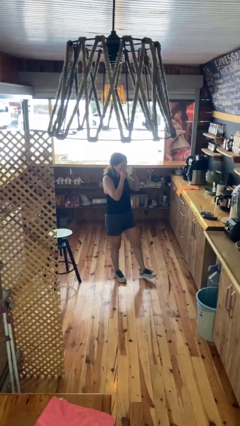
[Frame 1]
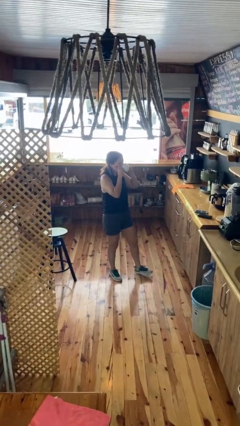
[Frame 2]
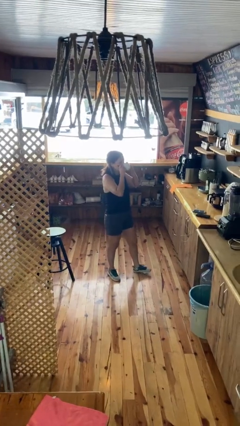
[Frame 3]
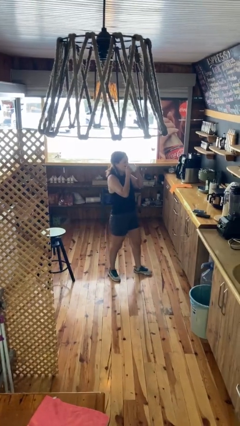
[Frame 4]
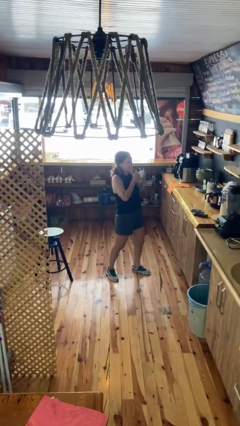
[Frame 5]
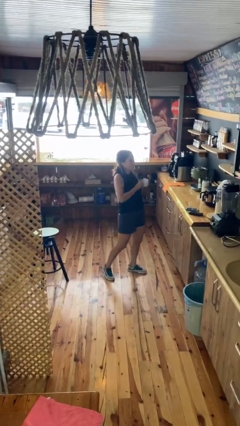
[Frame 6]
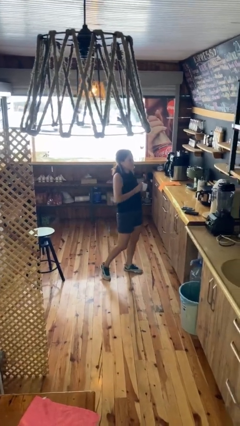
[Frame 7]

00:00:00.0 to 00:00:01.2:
person drinks from mug

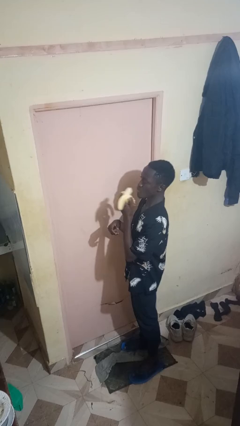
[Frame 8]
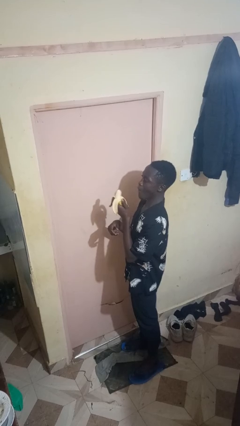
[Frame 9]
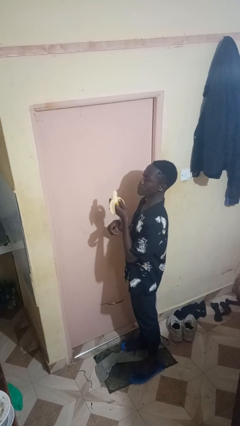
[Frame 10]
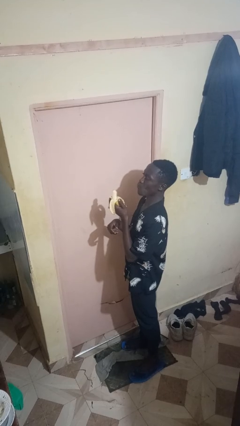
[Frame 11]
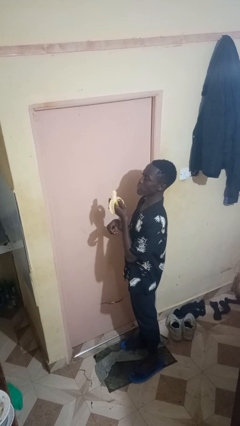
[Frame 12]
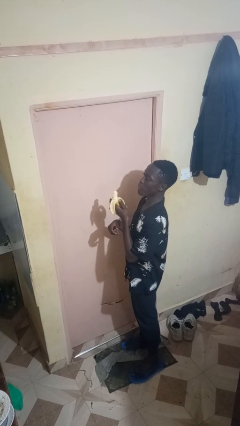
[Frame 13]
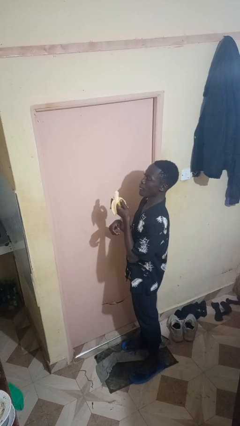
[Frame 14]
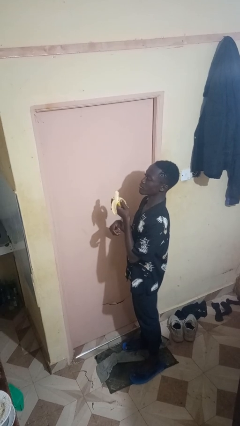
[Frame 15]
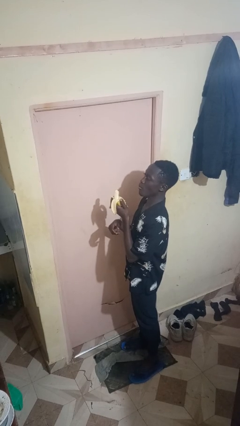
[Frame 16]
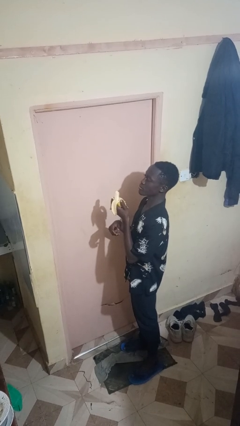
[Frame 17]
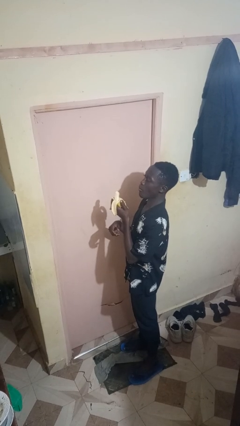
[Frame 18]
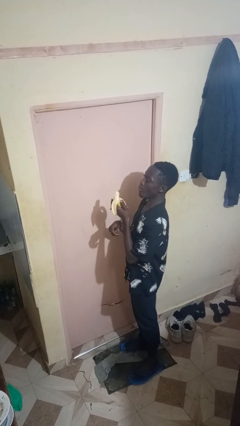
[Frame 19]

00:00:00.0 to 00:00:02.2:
person eats banana

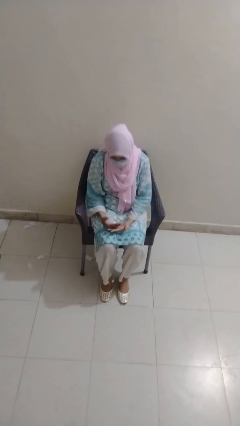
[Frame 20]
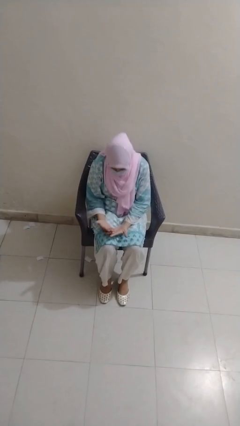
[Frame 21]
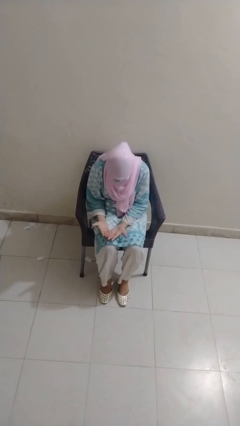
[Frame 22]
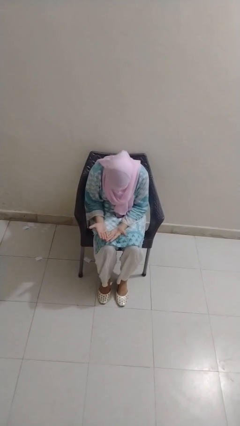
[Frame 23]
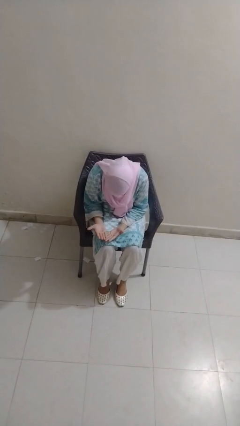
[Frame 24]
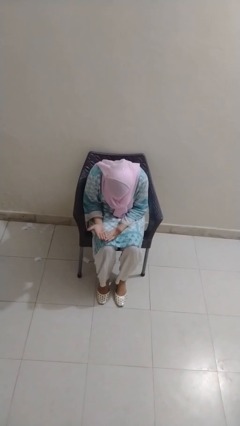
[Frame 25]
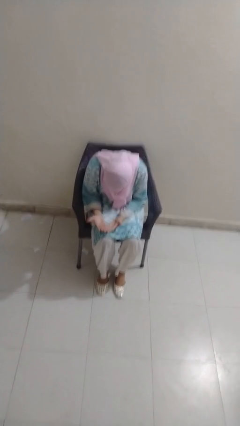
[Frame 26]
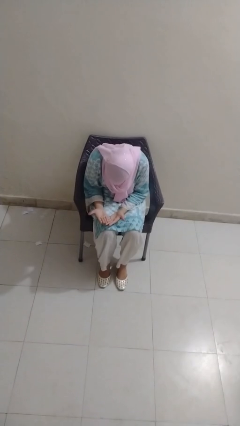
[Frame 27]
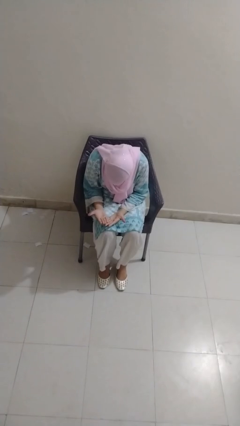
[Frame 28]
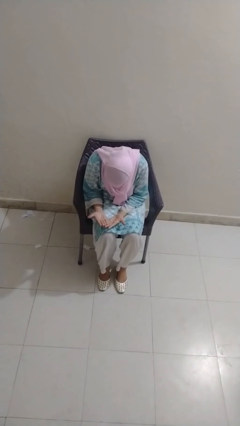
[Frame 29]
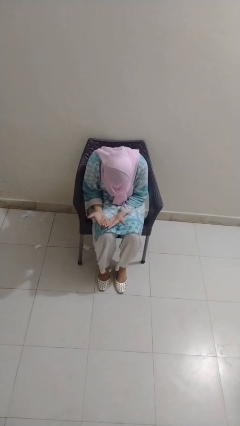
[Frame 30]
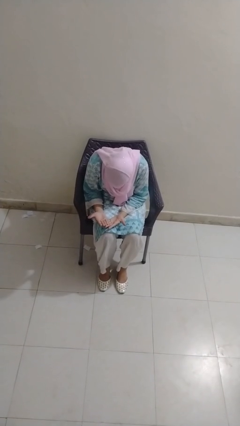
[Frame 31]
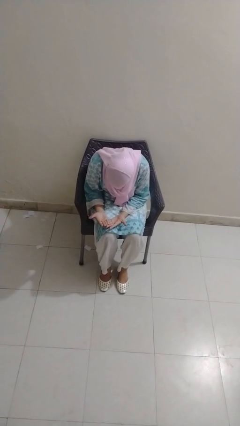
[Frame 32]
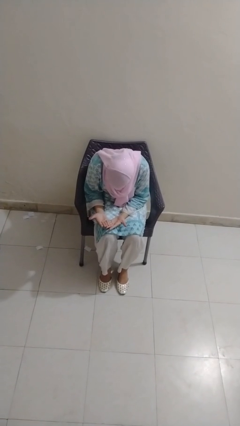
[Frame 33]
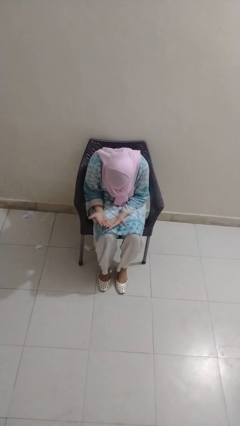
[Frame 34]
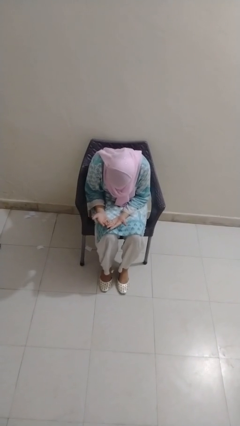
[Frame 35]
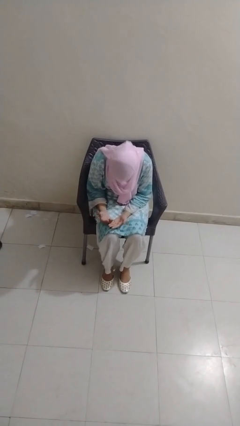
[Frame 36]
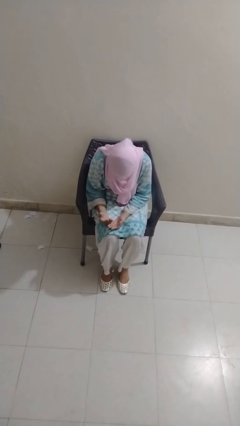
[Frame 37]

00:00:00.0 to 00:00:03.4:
person looks at hands in lap

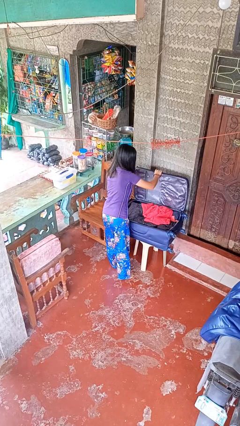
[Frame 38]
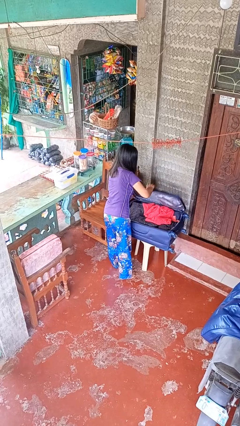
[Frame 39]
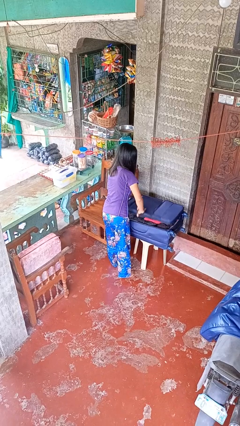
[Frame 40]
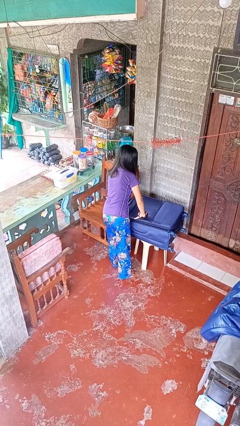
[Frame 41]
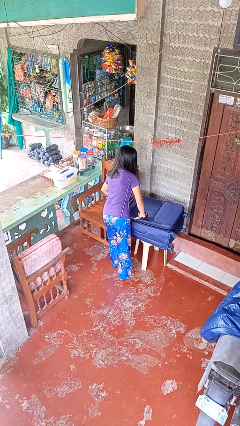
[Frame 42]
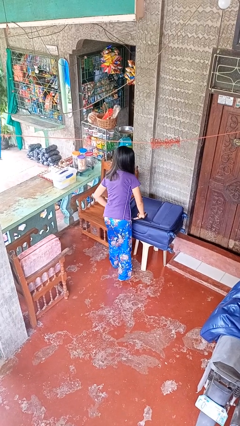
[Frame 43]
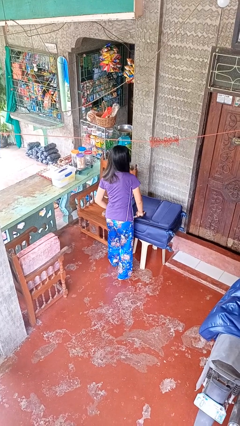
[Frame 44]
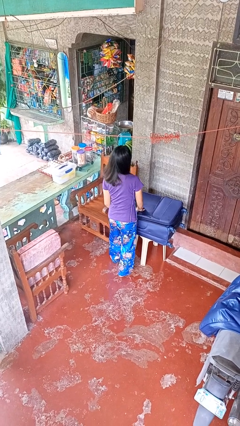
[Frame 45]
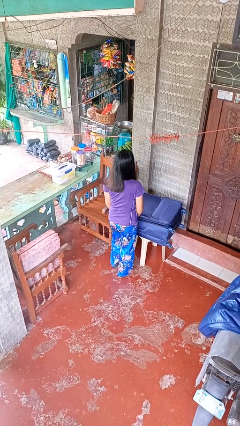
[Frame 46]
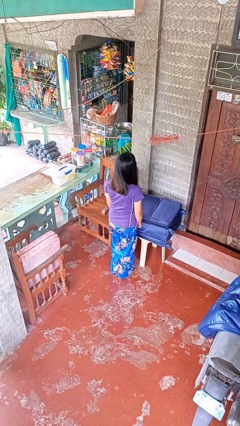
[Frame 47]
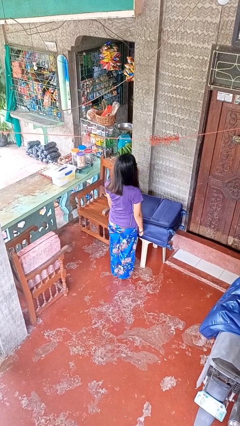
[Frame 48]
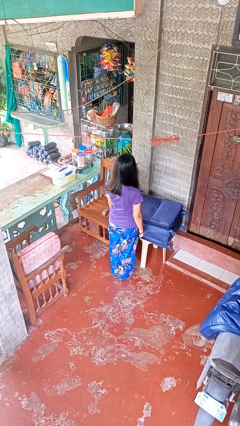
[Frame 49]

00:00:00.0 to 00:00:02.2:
person closes suitcase

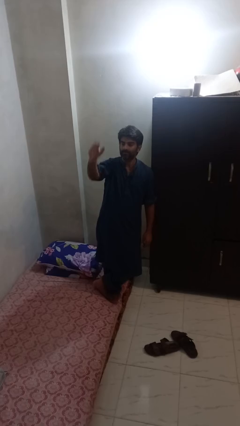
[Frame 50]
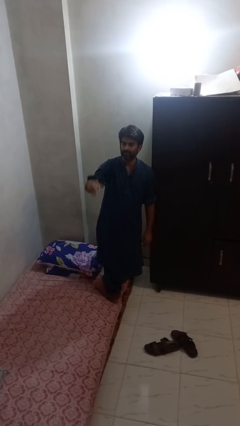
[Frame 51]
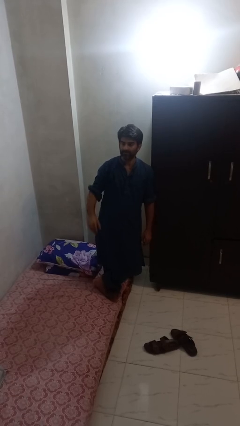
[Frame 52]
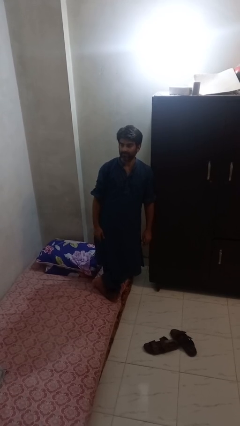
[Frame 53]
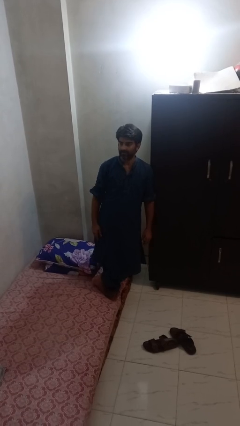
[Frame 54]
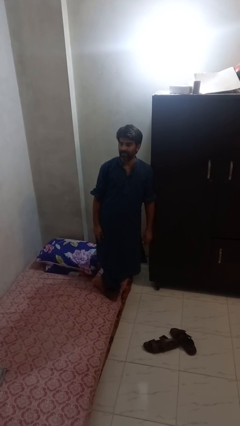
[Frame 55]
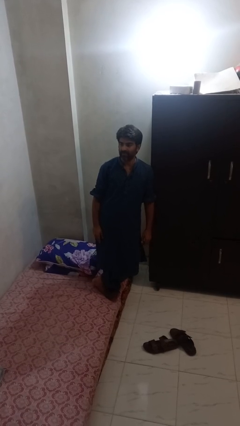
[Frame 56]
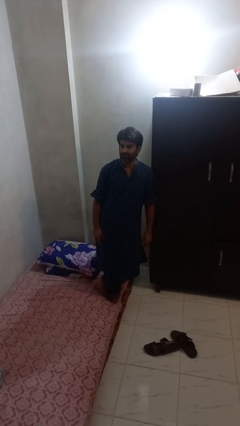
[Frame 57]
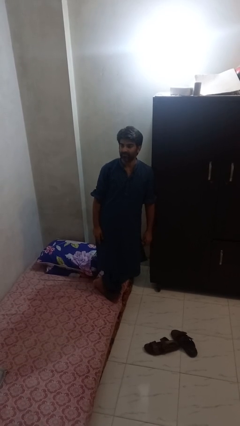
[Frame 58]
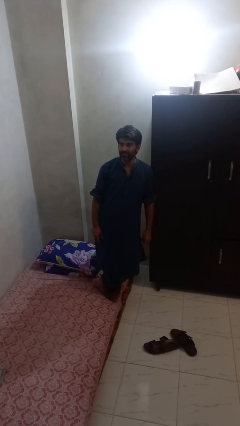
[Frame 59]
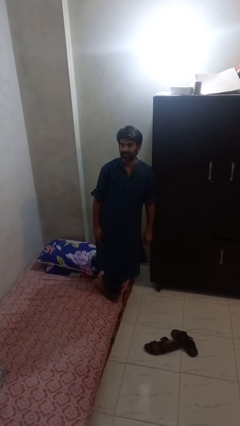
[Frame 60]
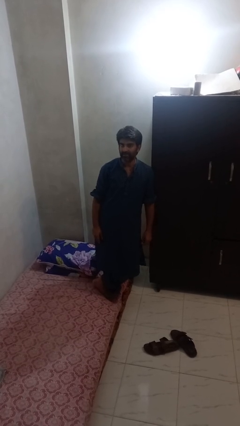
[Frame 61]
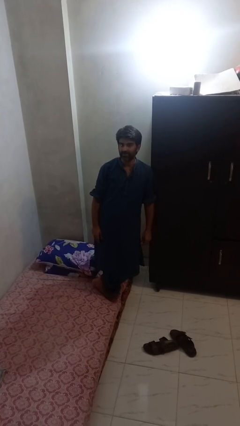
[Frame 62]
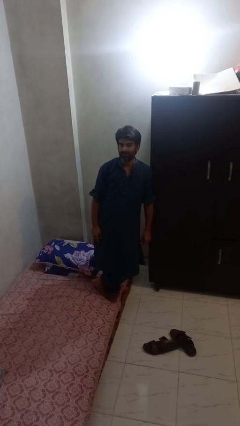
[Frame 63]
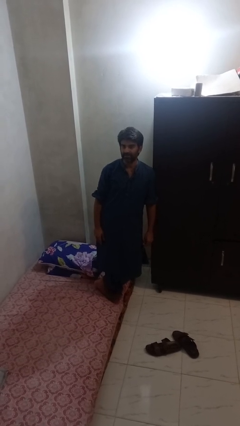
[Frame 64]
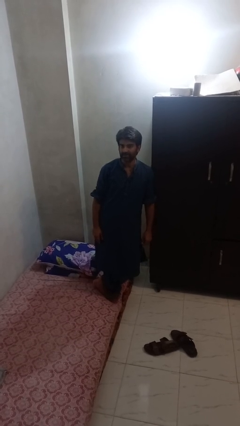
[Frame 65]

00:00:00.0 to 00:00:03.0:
person gestures lower hand

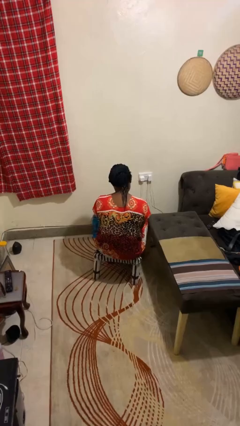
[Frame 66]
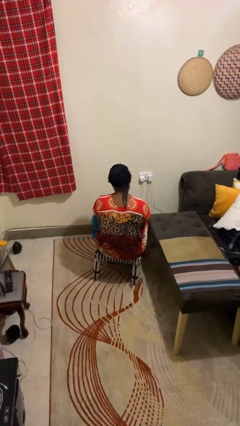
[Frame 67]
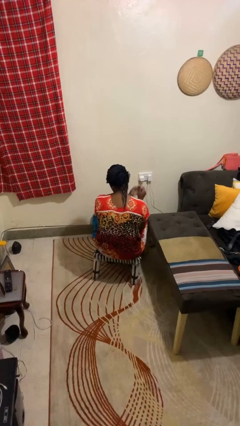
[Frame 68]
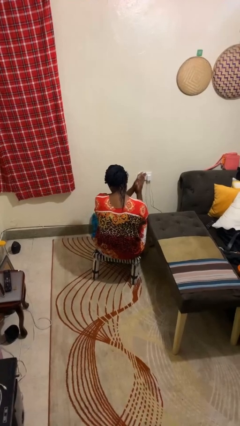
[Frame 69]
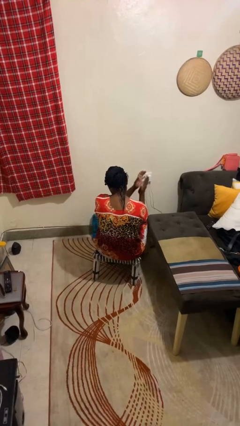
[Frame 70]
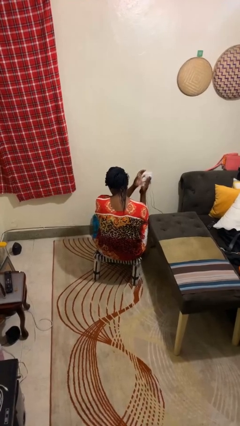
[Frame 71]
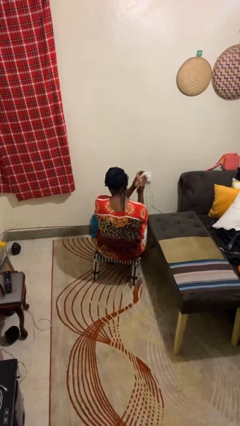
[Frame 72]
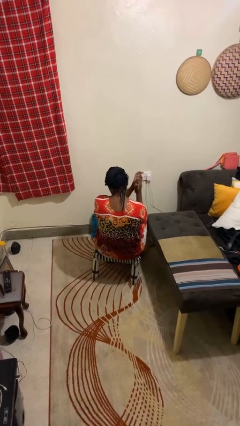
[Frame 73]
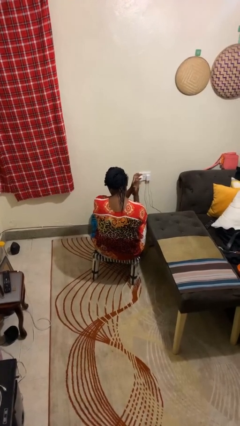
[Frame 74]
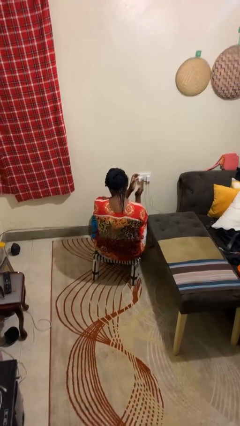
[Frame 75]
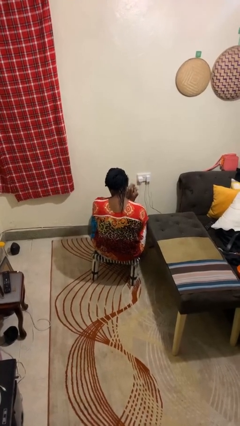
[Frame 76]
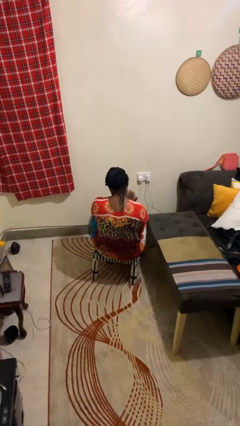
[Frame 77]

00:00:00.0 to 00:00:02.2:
person claps hands

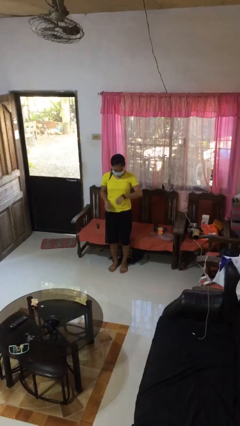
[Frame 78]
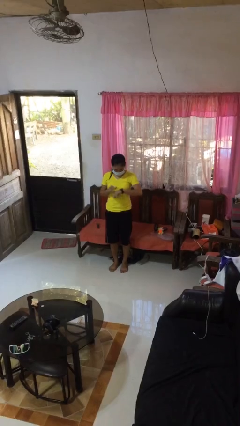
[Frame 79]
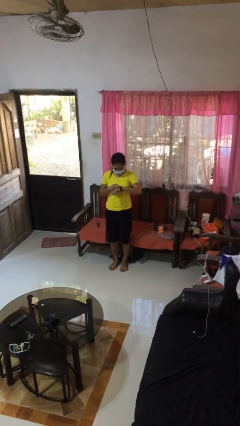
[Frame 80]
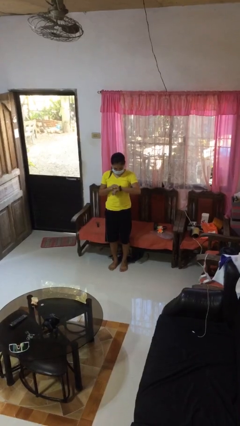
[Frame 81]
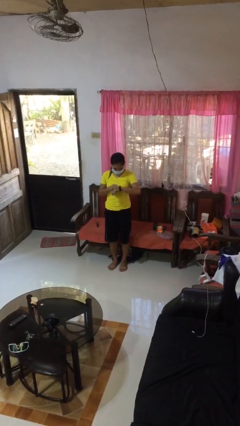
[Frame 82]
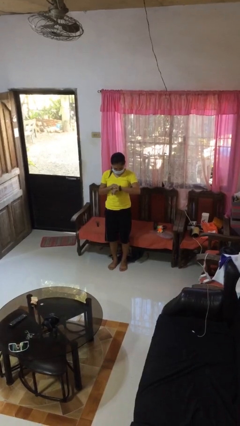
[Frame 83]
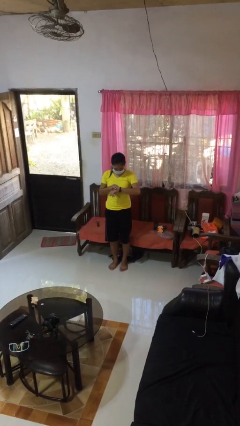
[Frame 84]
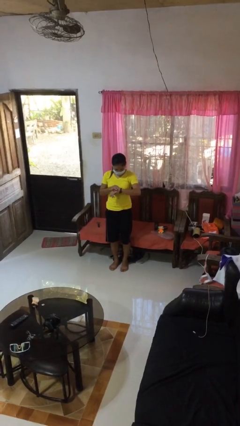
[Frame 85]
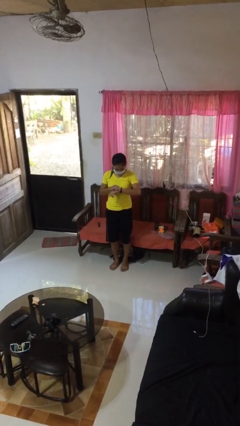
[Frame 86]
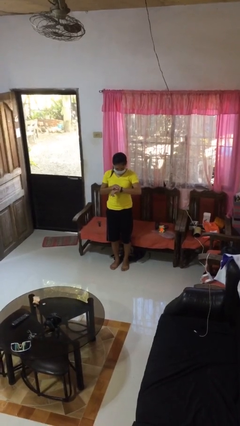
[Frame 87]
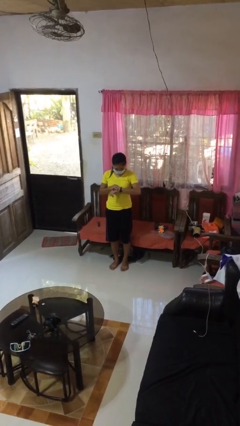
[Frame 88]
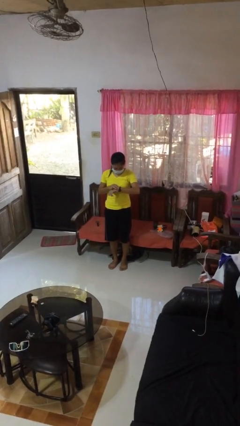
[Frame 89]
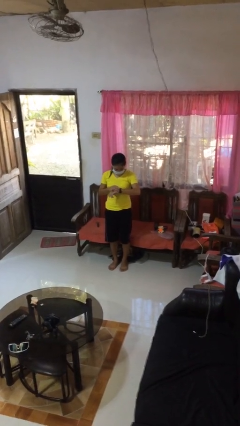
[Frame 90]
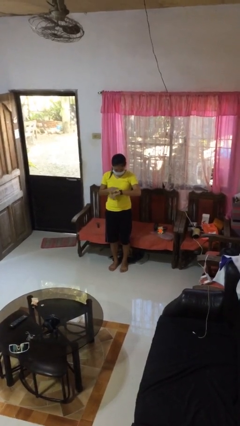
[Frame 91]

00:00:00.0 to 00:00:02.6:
person looks at wristwatch

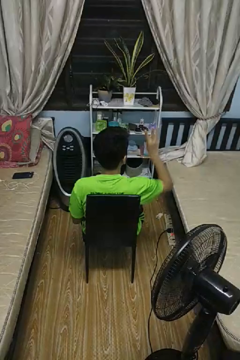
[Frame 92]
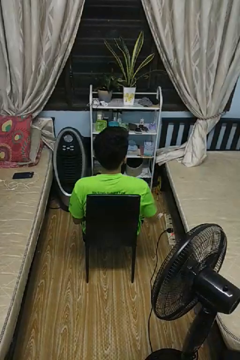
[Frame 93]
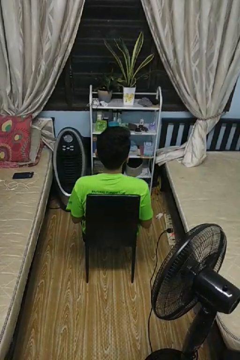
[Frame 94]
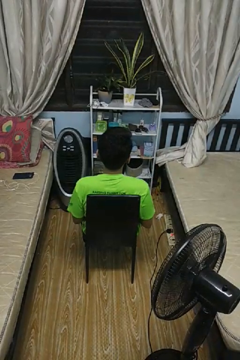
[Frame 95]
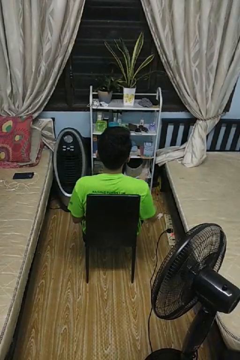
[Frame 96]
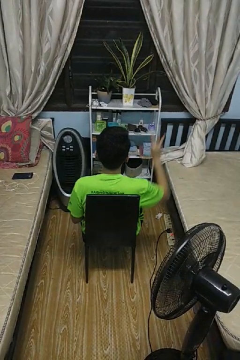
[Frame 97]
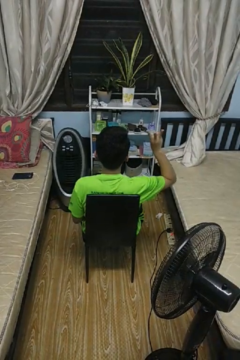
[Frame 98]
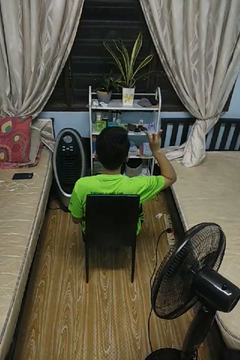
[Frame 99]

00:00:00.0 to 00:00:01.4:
person gestures number three
